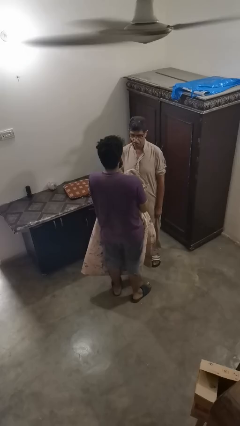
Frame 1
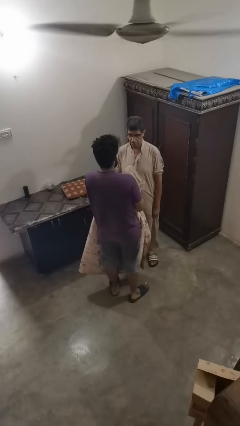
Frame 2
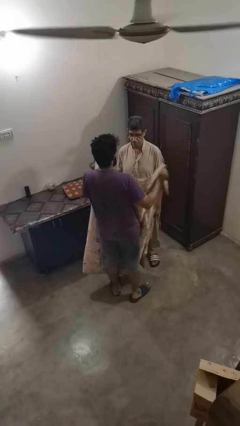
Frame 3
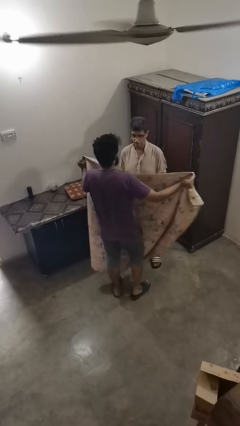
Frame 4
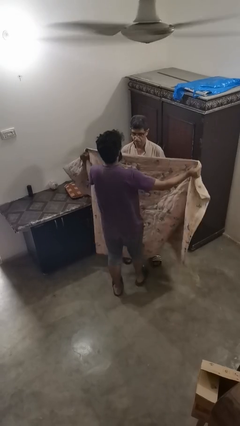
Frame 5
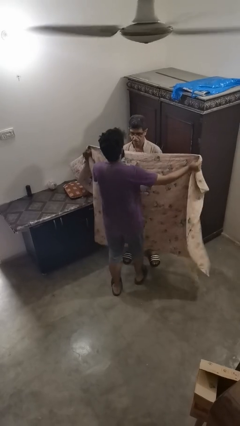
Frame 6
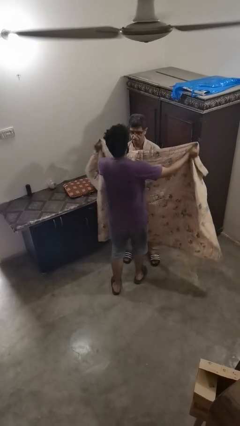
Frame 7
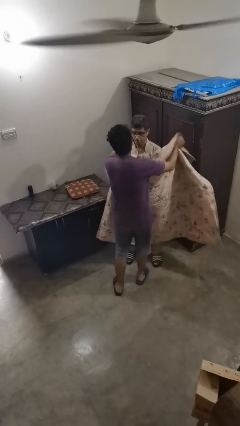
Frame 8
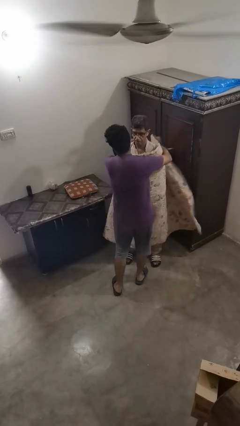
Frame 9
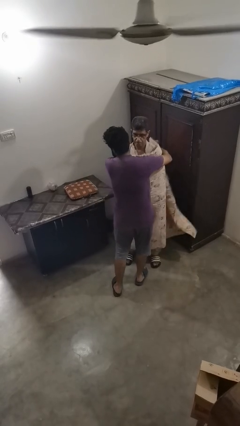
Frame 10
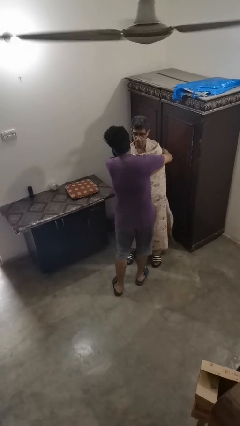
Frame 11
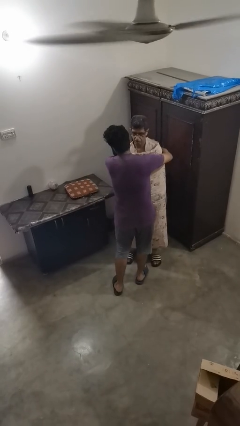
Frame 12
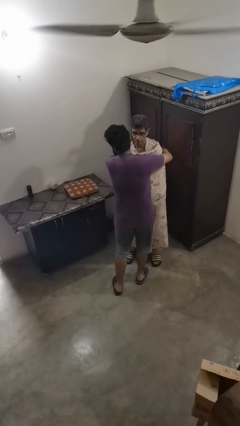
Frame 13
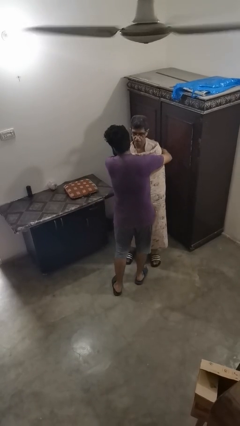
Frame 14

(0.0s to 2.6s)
person covers friend with blanket

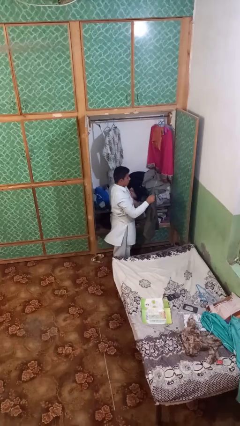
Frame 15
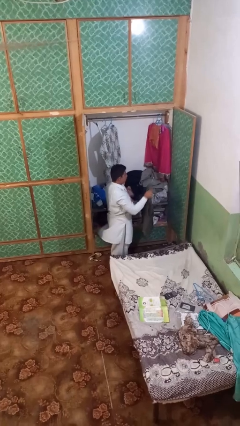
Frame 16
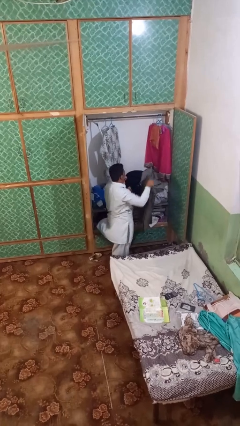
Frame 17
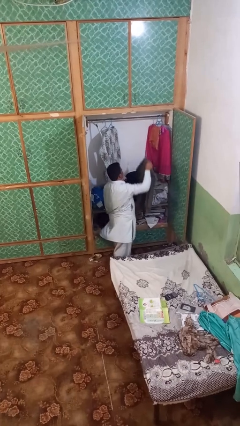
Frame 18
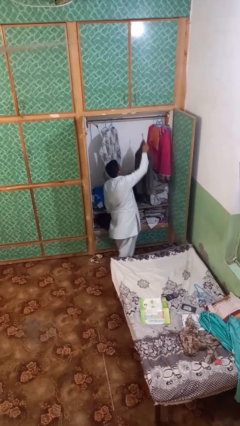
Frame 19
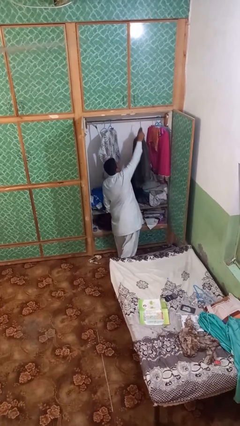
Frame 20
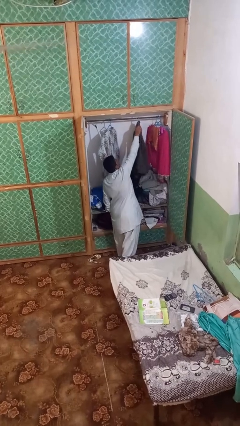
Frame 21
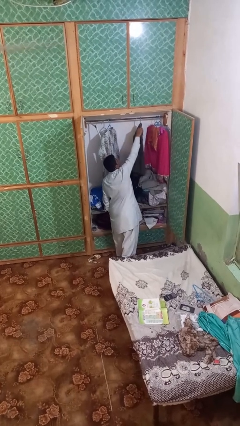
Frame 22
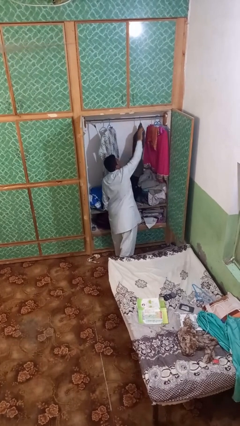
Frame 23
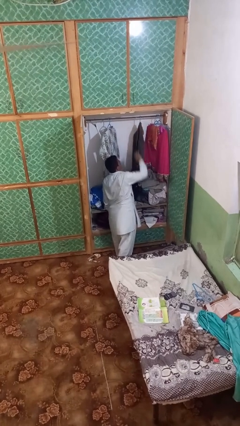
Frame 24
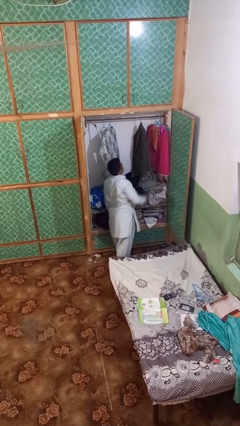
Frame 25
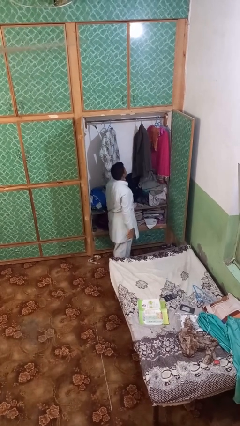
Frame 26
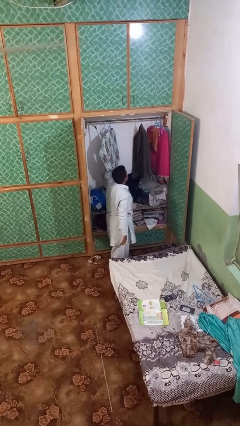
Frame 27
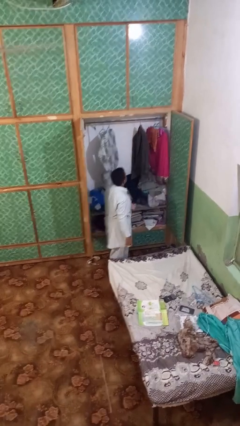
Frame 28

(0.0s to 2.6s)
person puts clothes into closet

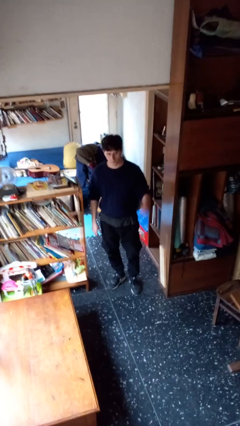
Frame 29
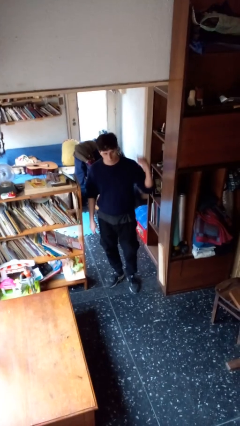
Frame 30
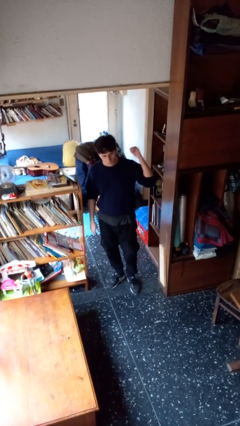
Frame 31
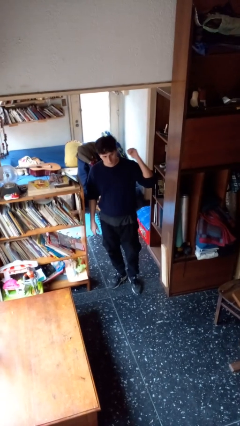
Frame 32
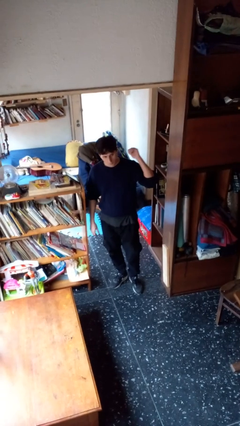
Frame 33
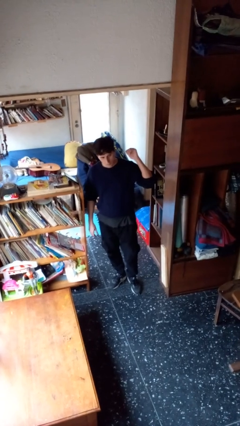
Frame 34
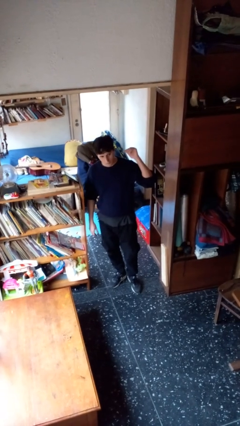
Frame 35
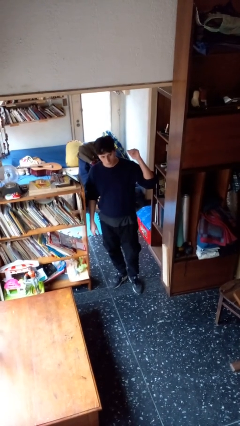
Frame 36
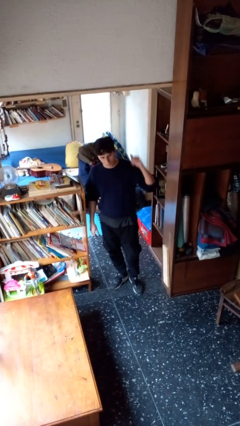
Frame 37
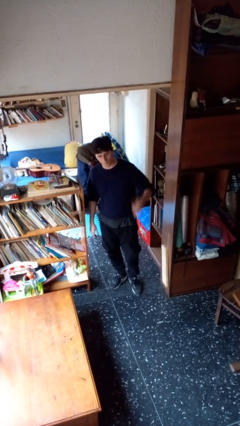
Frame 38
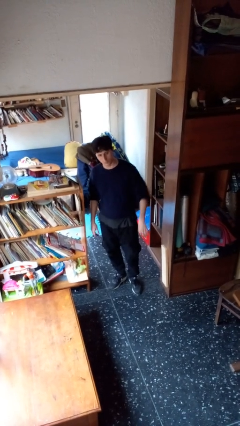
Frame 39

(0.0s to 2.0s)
person gestures behind me

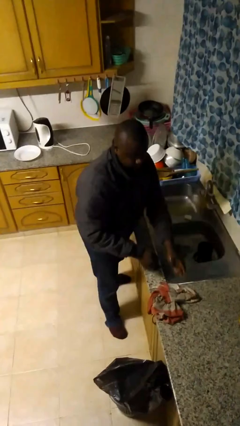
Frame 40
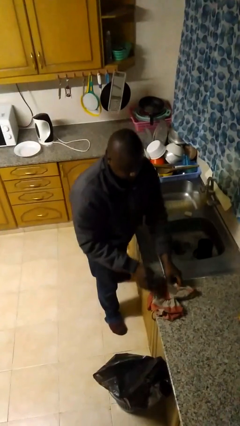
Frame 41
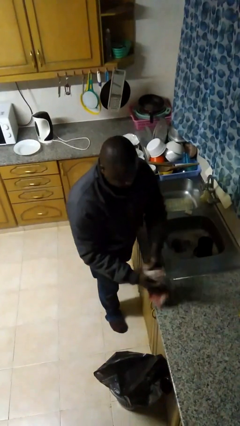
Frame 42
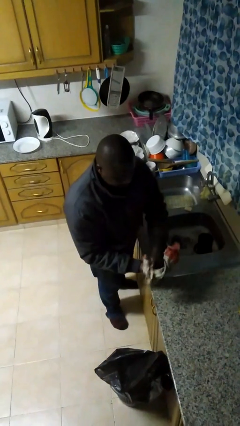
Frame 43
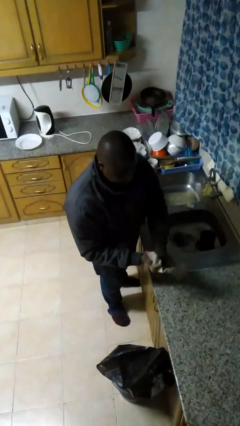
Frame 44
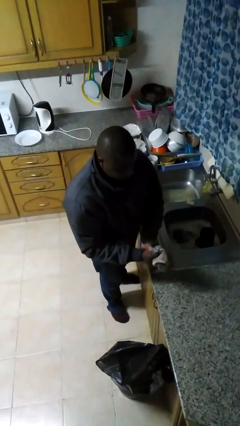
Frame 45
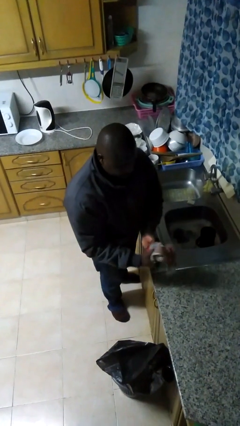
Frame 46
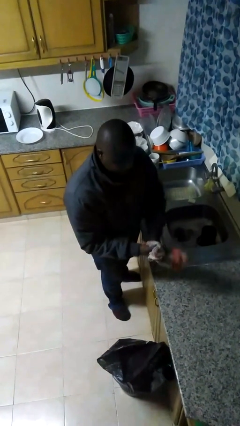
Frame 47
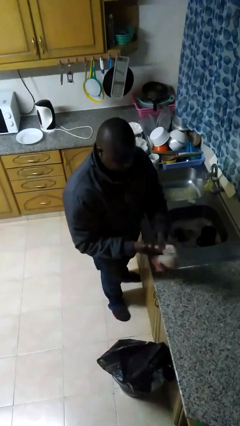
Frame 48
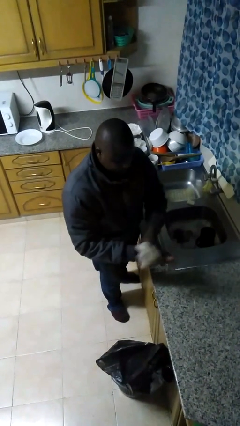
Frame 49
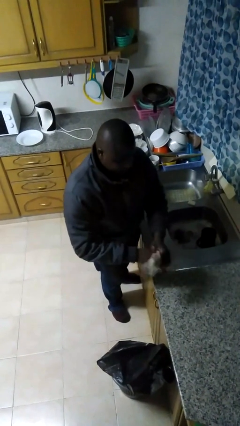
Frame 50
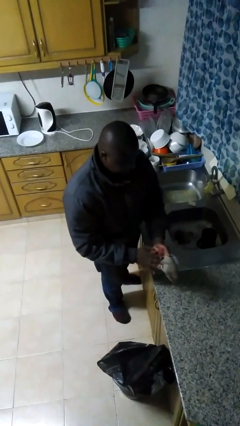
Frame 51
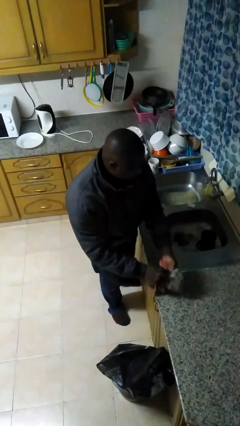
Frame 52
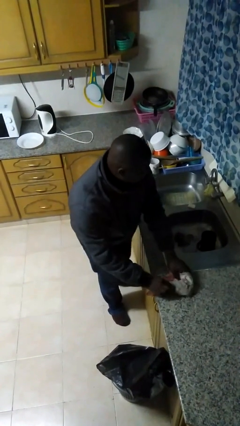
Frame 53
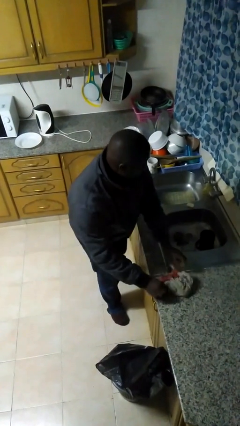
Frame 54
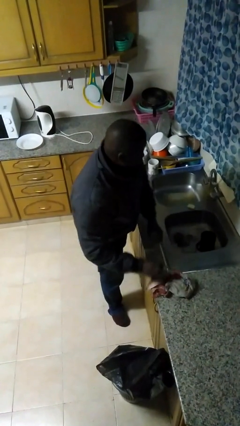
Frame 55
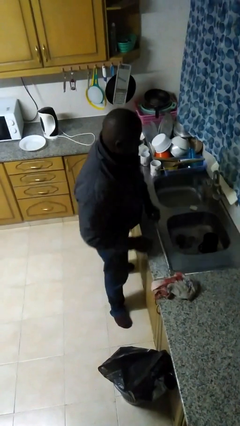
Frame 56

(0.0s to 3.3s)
person dries hands with towel

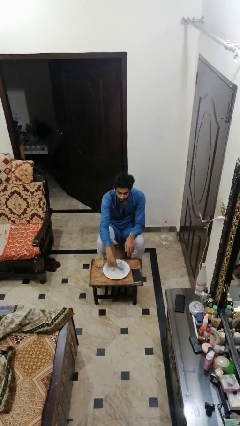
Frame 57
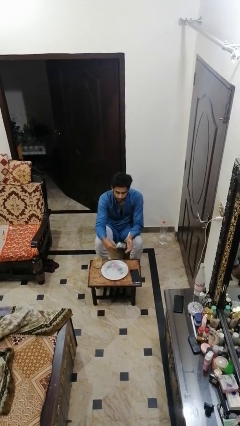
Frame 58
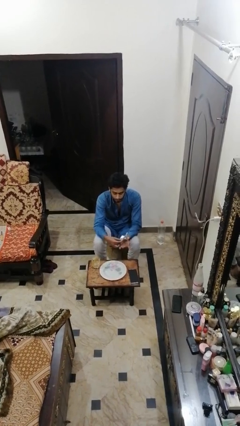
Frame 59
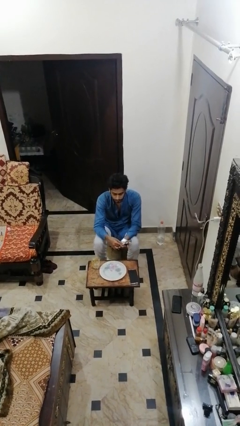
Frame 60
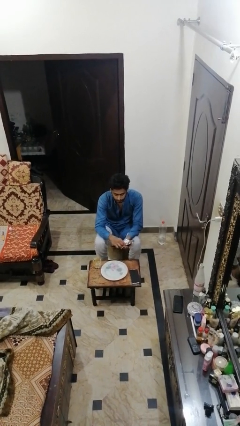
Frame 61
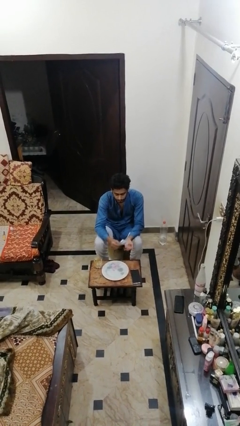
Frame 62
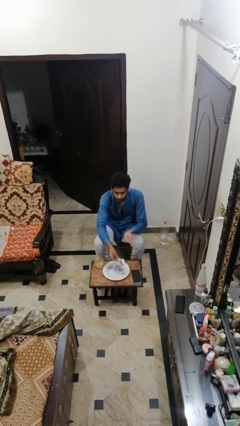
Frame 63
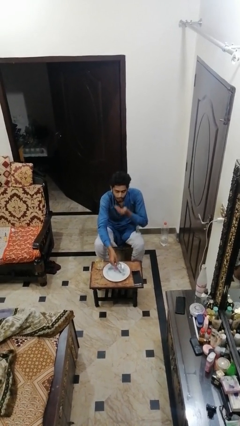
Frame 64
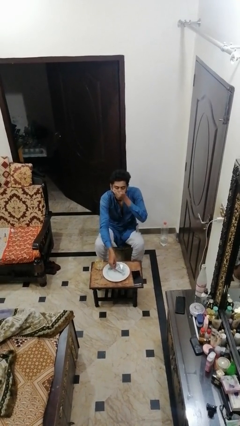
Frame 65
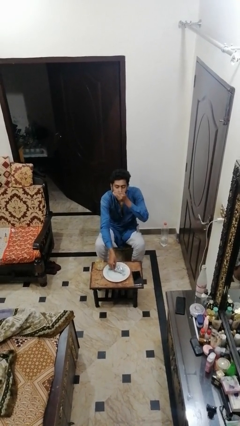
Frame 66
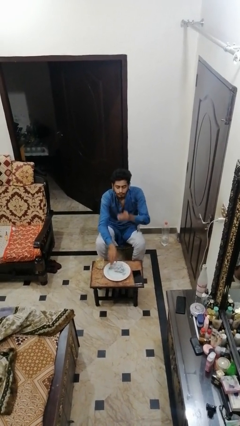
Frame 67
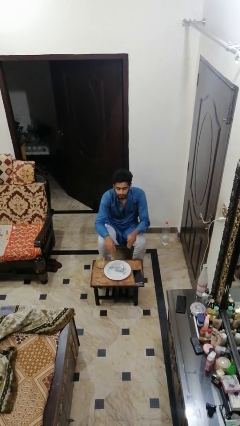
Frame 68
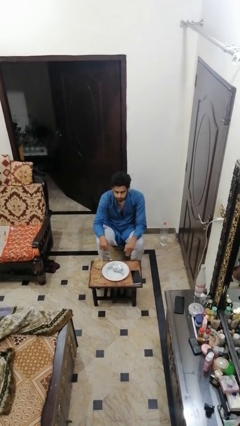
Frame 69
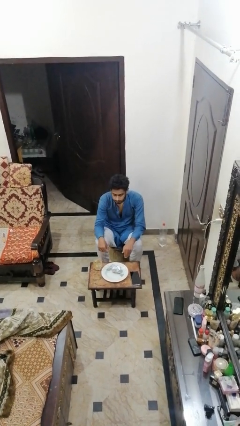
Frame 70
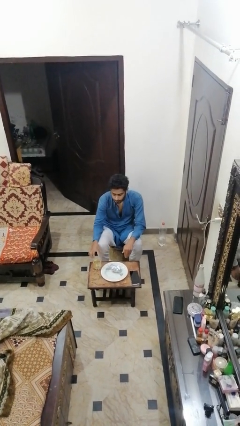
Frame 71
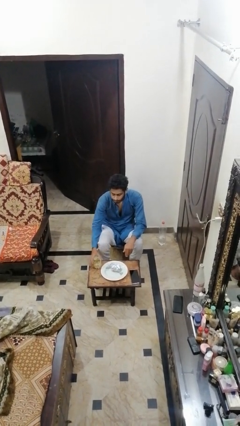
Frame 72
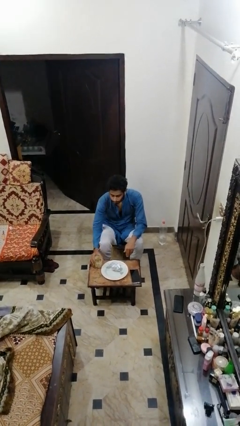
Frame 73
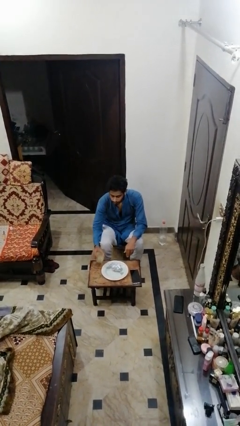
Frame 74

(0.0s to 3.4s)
person takes medicine pills

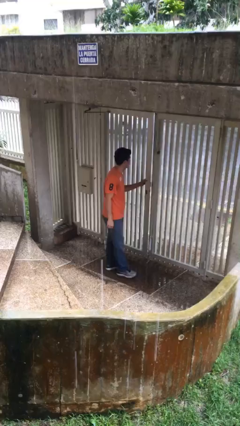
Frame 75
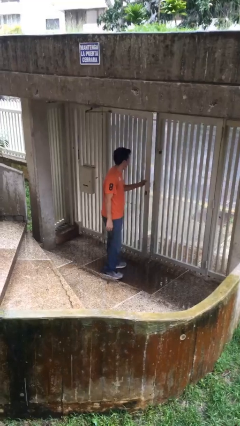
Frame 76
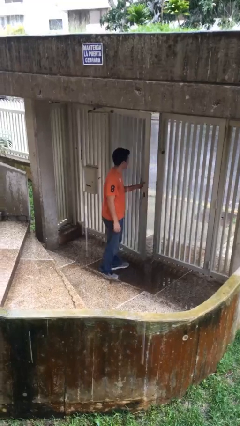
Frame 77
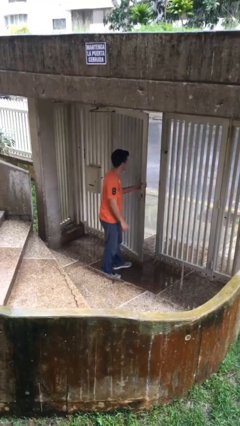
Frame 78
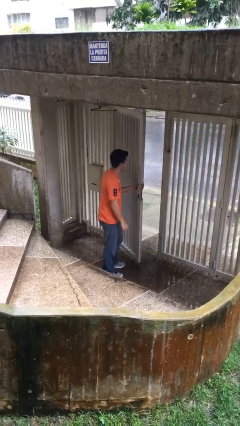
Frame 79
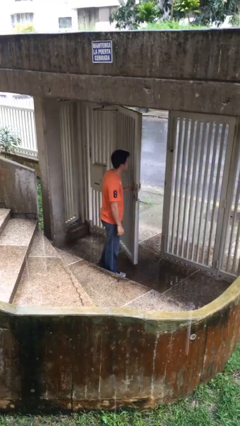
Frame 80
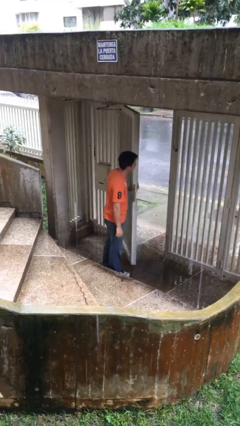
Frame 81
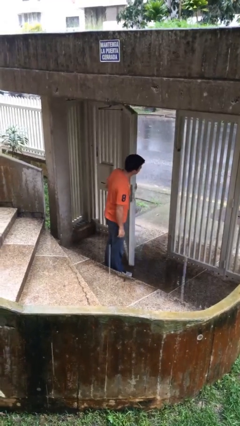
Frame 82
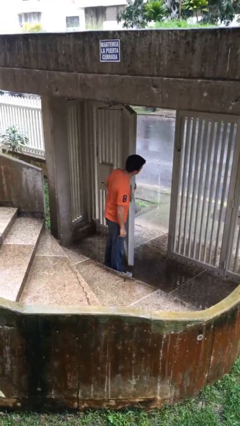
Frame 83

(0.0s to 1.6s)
person opens facility door

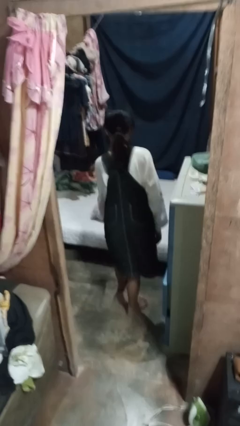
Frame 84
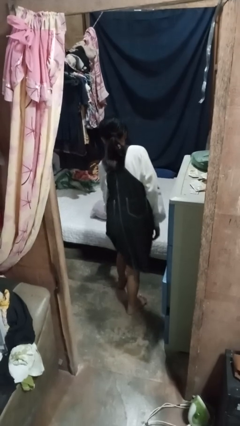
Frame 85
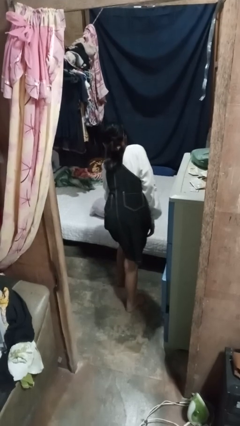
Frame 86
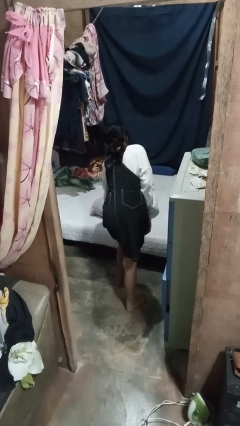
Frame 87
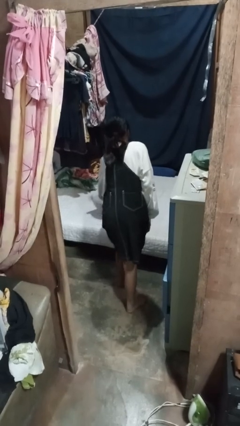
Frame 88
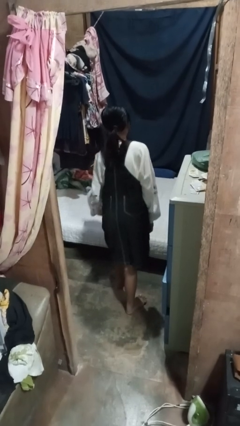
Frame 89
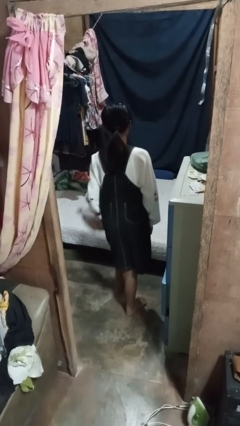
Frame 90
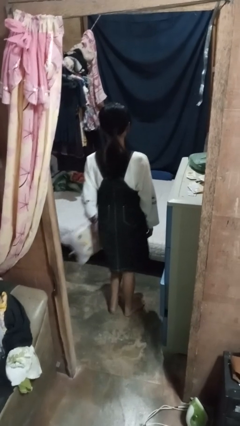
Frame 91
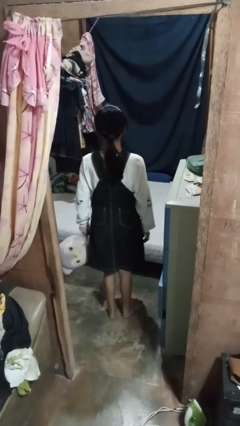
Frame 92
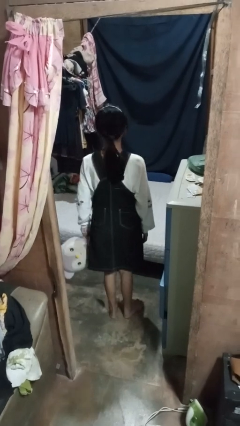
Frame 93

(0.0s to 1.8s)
person picks up object from bed
